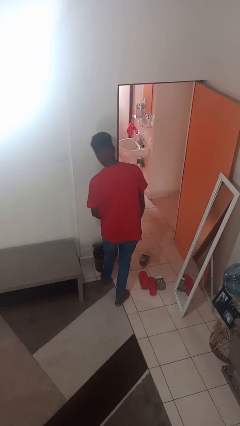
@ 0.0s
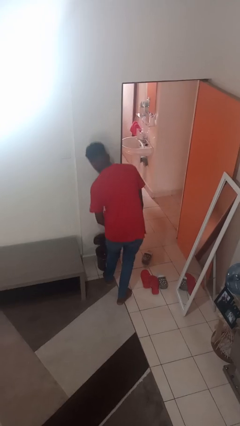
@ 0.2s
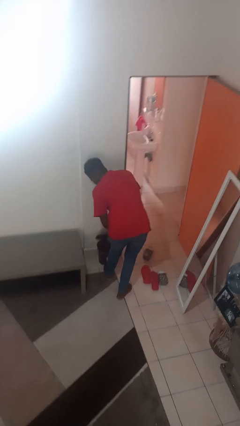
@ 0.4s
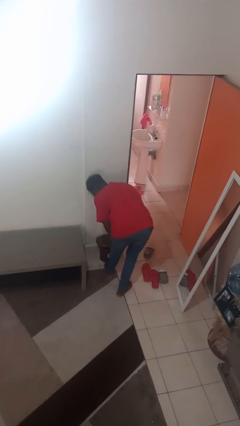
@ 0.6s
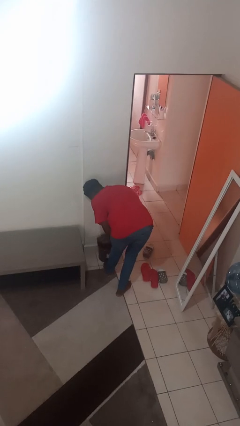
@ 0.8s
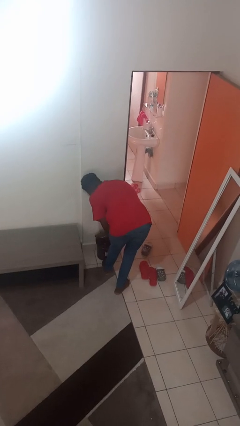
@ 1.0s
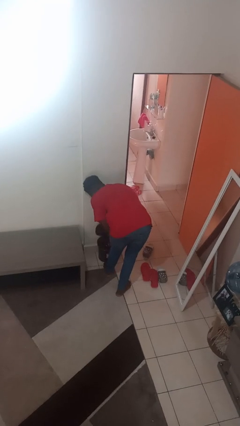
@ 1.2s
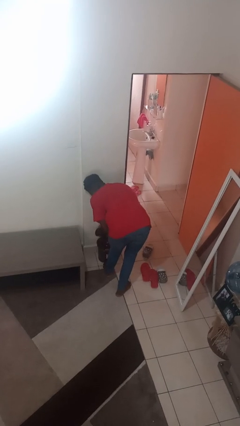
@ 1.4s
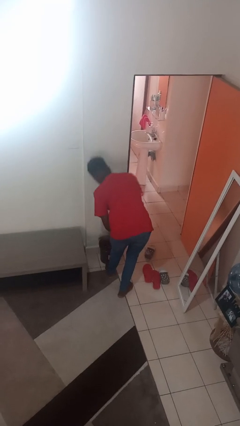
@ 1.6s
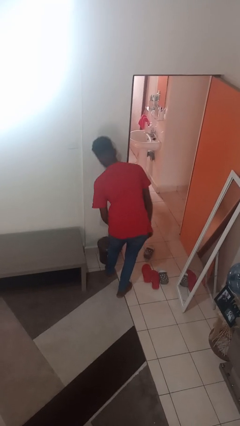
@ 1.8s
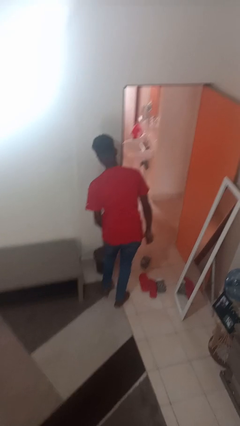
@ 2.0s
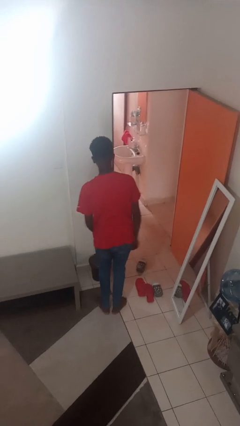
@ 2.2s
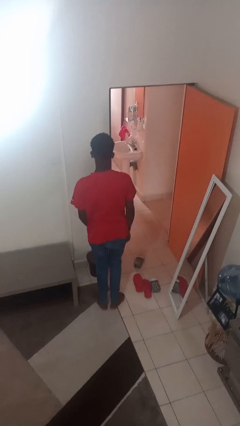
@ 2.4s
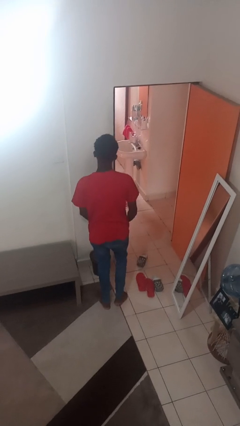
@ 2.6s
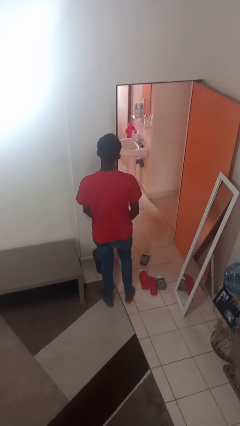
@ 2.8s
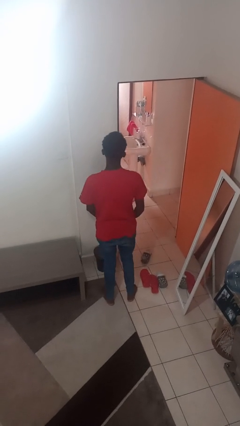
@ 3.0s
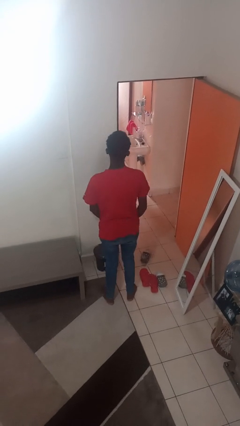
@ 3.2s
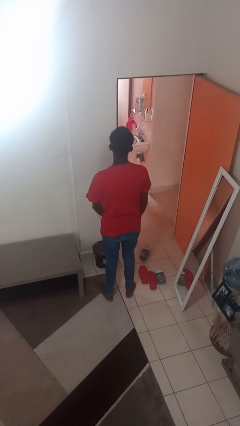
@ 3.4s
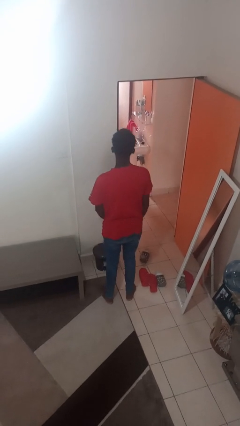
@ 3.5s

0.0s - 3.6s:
person discards trash

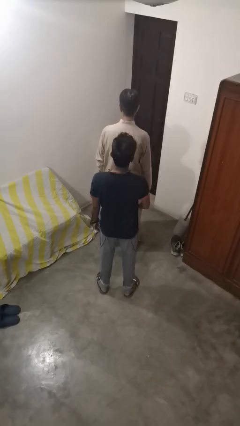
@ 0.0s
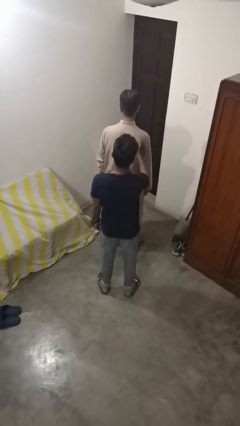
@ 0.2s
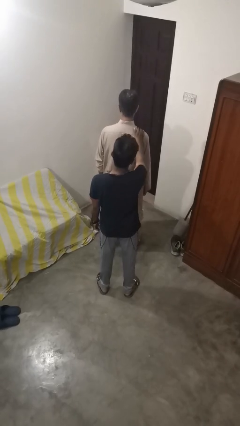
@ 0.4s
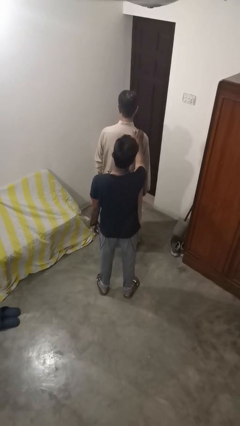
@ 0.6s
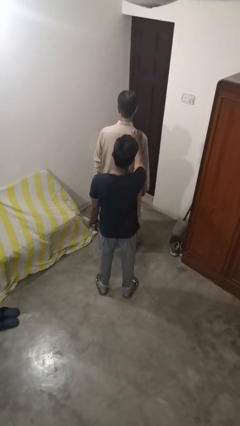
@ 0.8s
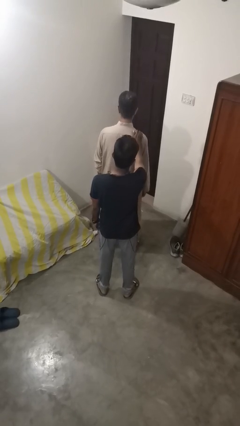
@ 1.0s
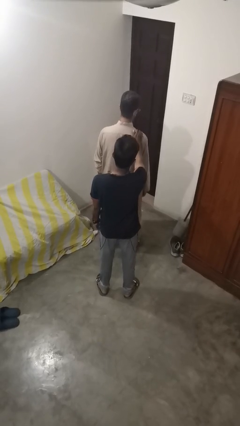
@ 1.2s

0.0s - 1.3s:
person grabs person by shoulder

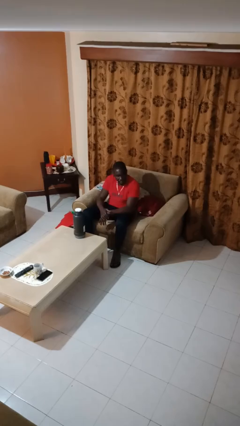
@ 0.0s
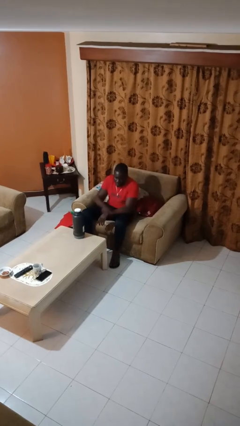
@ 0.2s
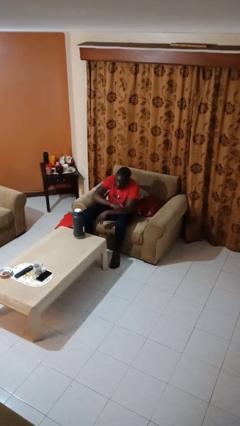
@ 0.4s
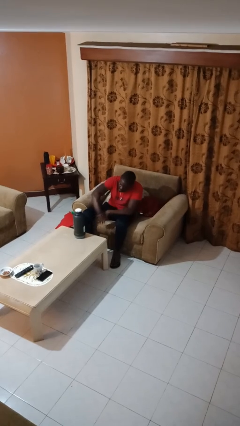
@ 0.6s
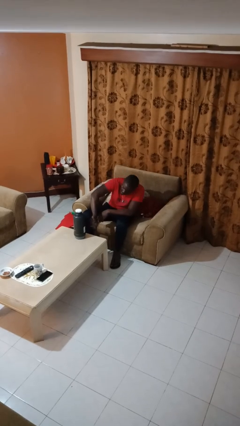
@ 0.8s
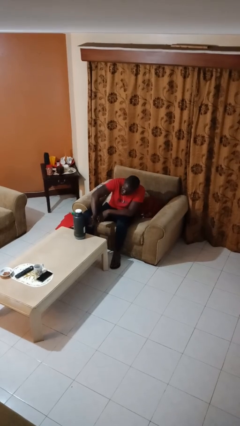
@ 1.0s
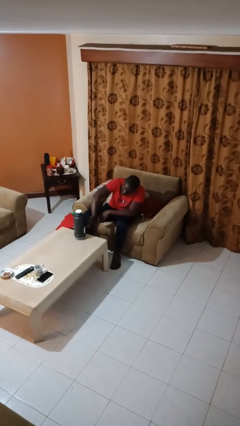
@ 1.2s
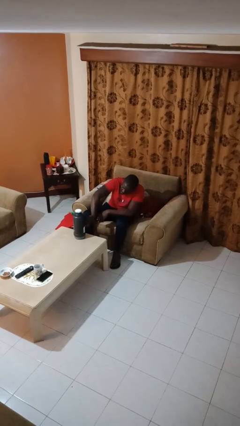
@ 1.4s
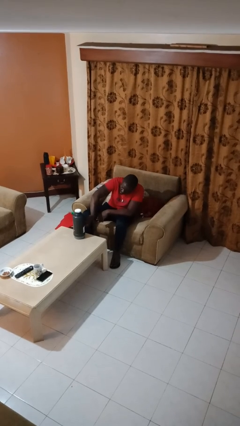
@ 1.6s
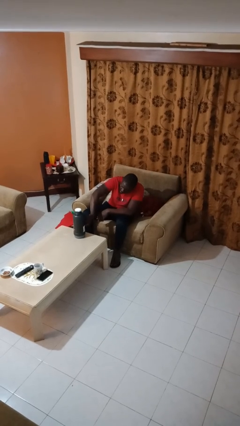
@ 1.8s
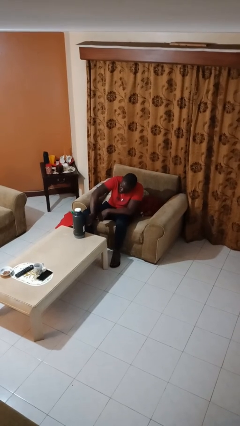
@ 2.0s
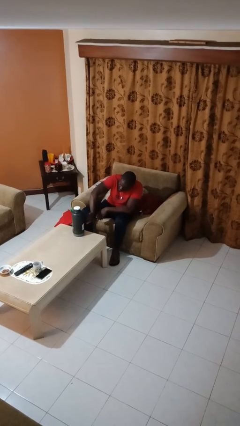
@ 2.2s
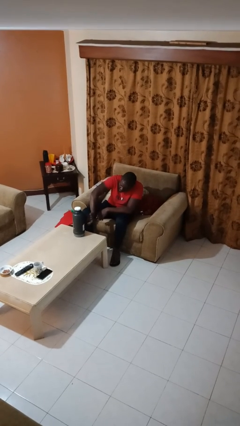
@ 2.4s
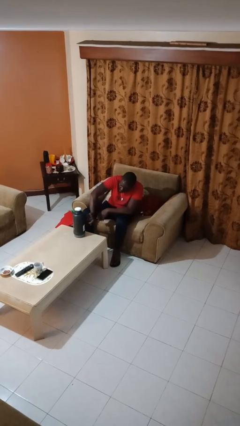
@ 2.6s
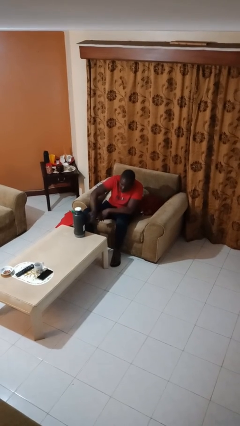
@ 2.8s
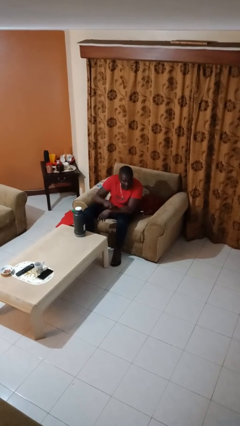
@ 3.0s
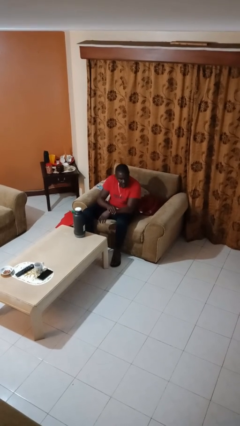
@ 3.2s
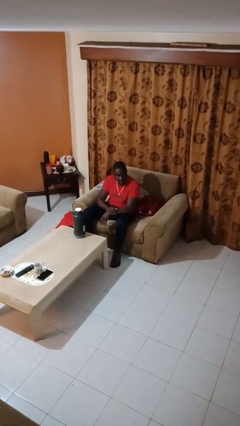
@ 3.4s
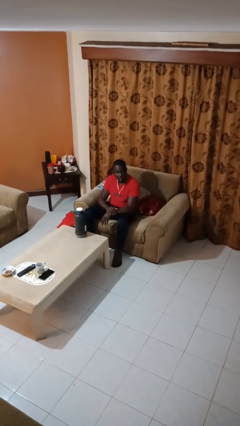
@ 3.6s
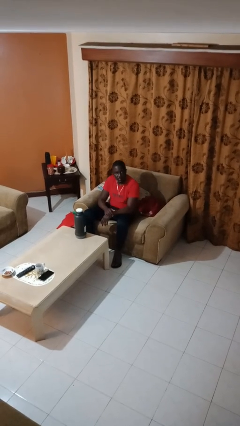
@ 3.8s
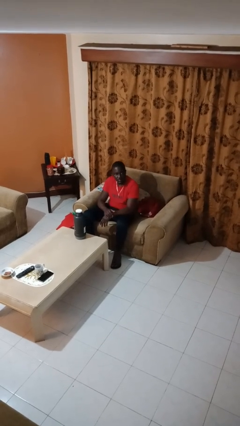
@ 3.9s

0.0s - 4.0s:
person taps object with finger

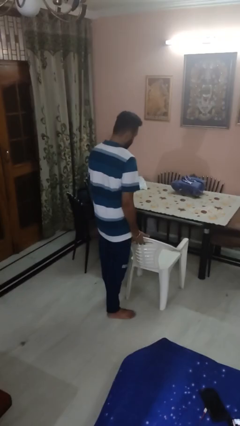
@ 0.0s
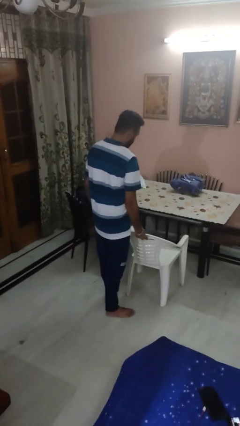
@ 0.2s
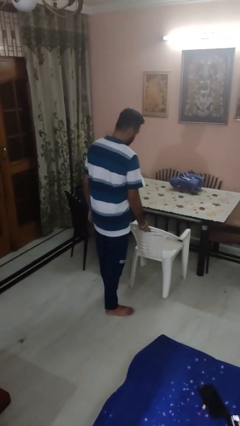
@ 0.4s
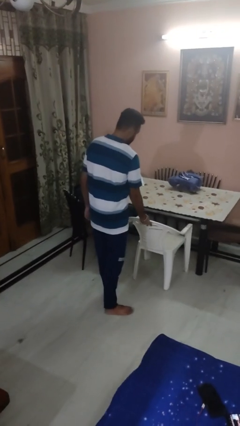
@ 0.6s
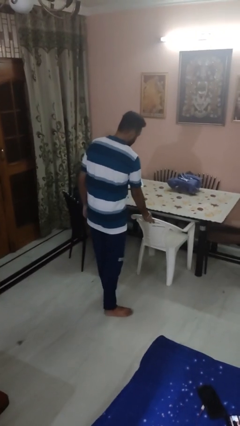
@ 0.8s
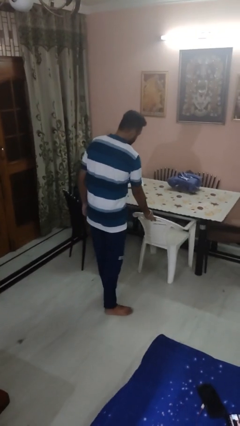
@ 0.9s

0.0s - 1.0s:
person pushes in chair

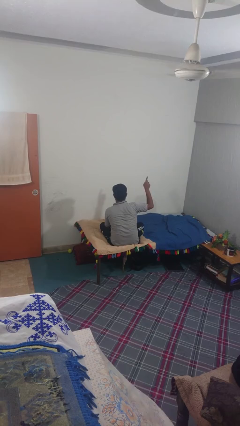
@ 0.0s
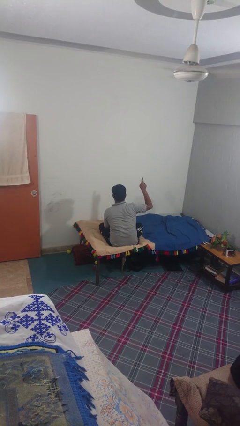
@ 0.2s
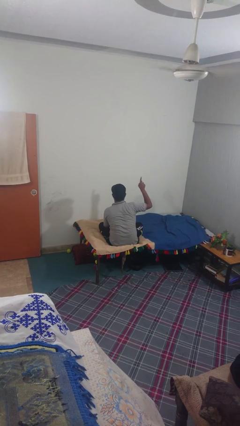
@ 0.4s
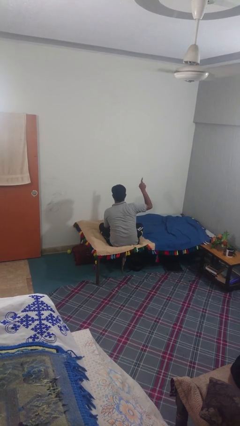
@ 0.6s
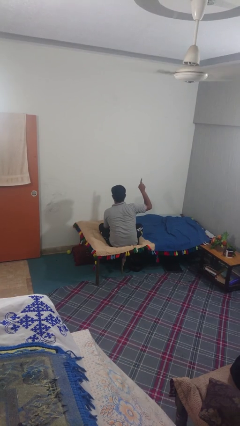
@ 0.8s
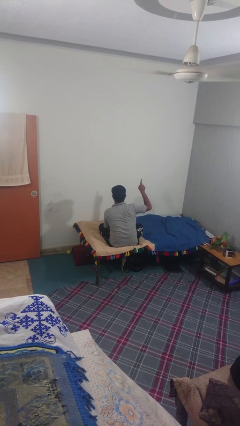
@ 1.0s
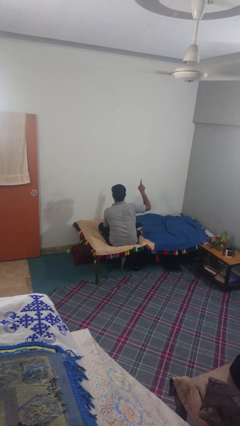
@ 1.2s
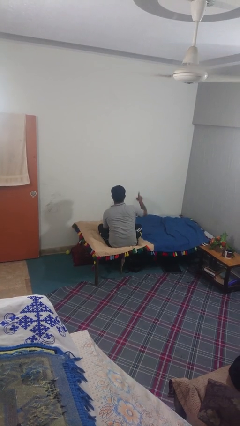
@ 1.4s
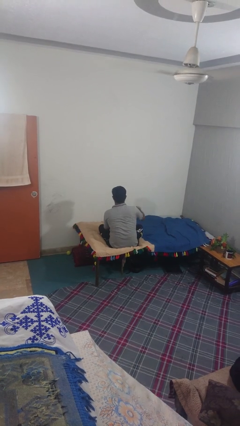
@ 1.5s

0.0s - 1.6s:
person gestures number one

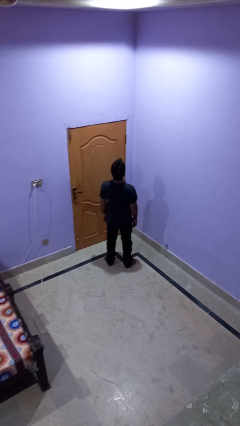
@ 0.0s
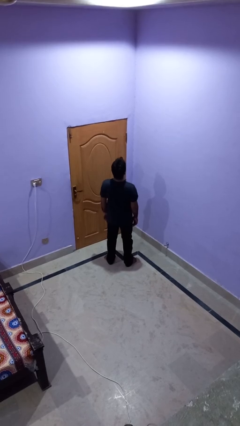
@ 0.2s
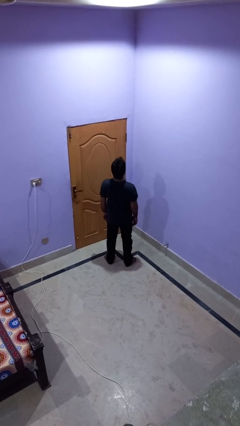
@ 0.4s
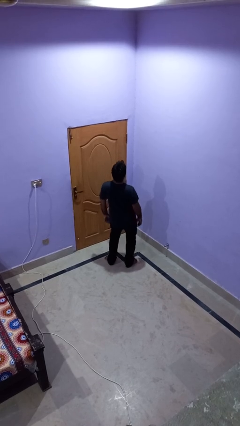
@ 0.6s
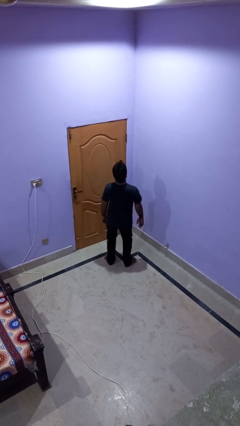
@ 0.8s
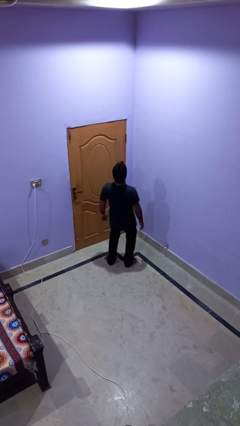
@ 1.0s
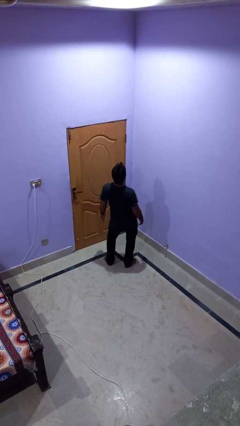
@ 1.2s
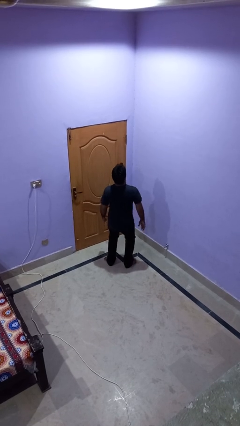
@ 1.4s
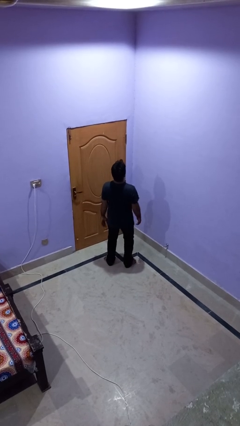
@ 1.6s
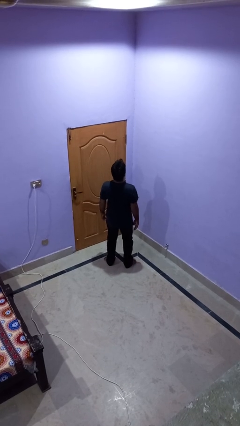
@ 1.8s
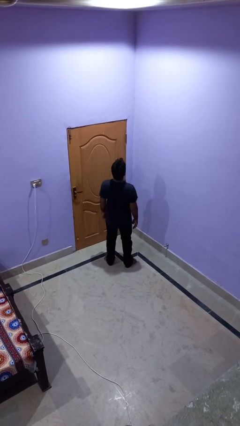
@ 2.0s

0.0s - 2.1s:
person wiggles hips

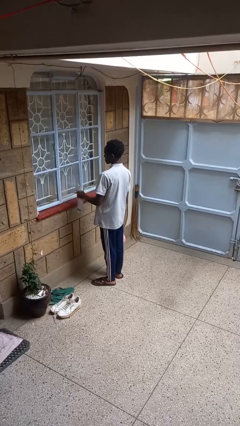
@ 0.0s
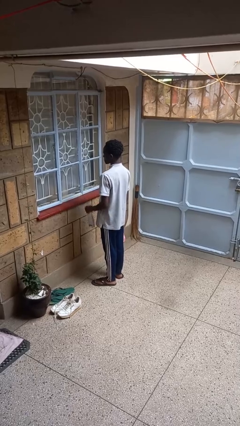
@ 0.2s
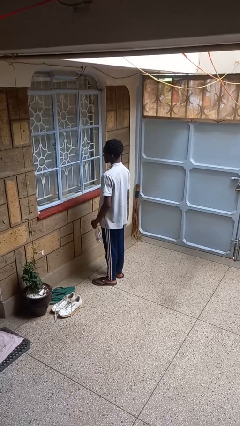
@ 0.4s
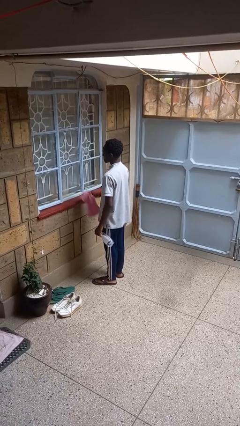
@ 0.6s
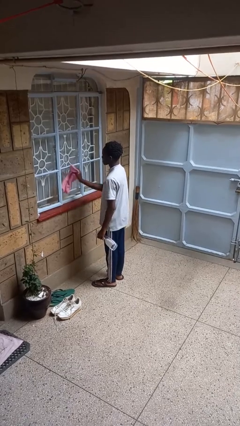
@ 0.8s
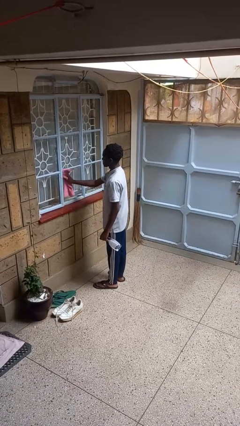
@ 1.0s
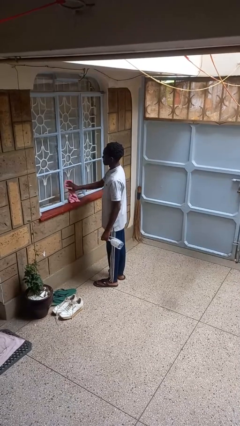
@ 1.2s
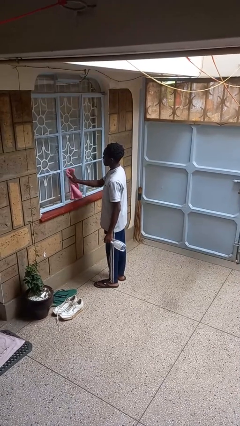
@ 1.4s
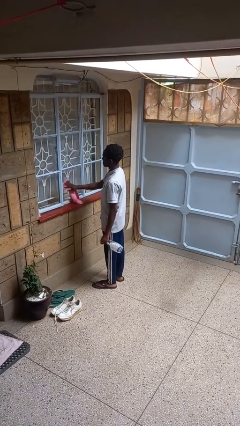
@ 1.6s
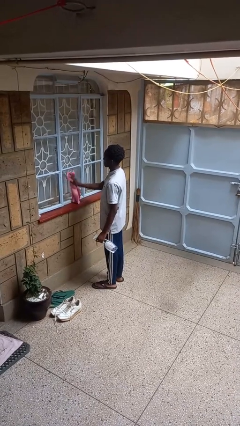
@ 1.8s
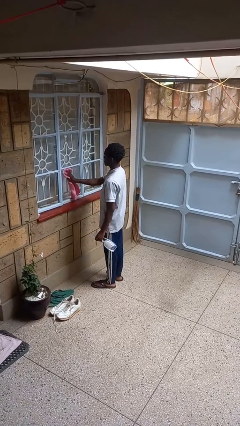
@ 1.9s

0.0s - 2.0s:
person washes window

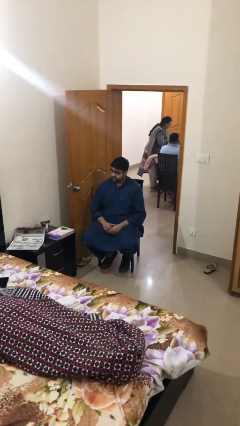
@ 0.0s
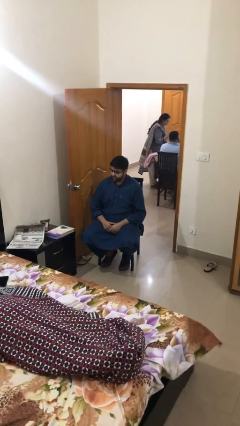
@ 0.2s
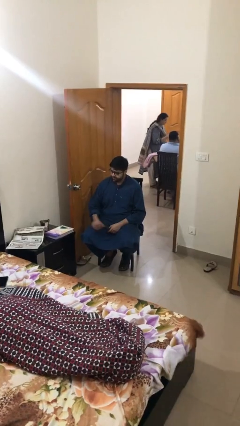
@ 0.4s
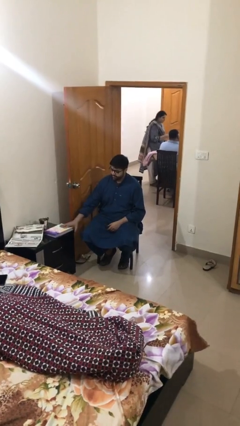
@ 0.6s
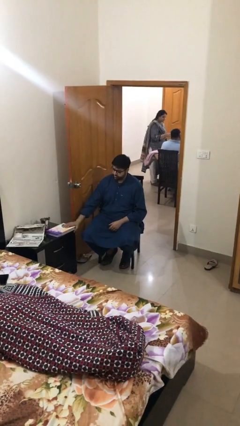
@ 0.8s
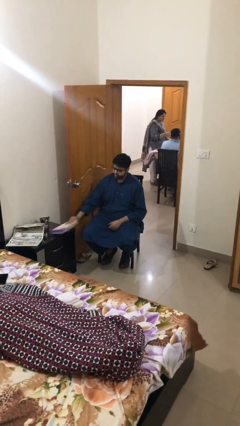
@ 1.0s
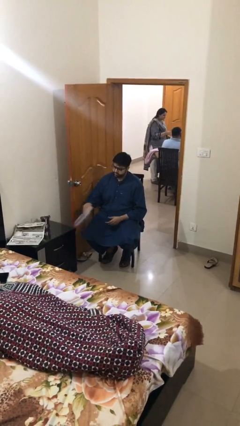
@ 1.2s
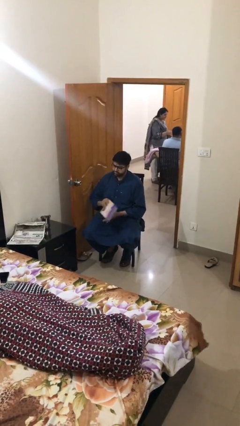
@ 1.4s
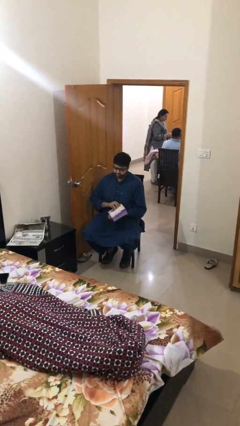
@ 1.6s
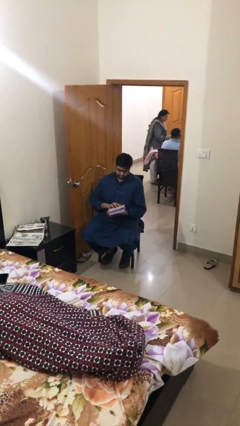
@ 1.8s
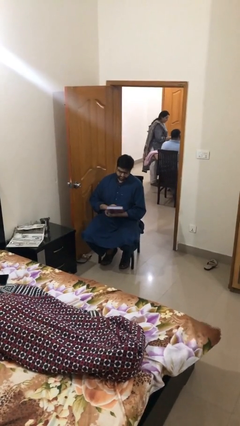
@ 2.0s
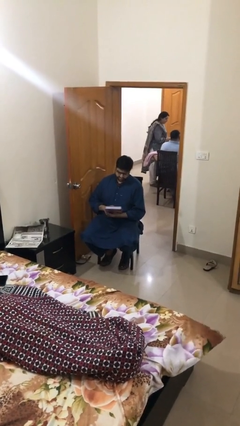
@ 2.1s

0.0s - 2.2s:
person picks up object from table
